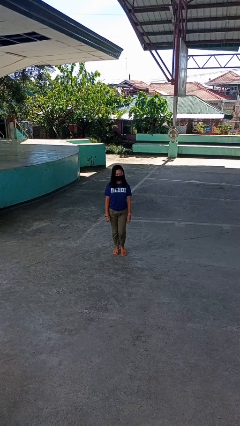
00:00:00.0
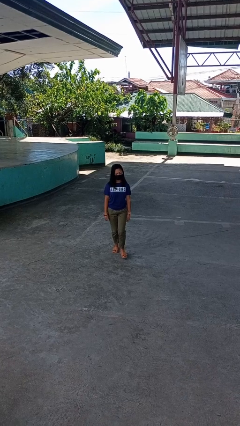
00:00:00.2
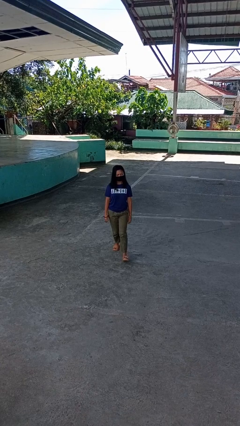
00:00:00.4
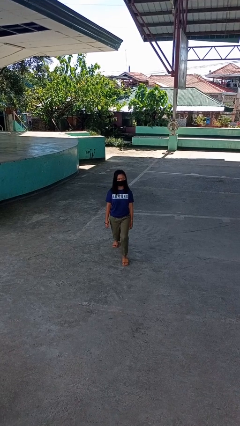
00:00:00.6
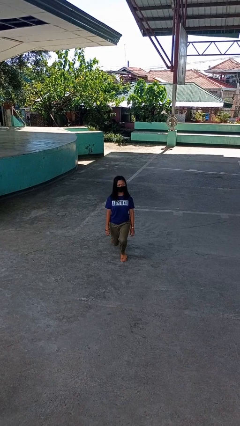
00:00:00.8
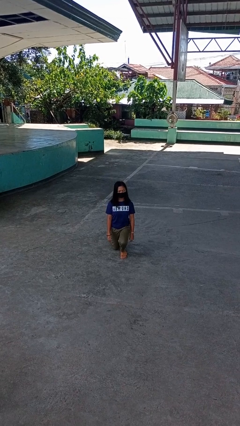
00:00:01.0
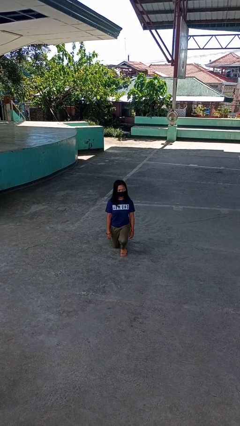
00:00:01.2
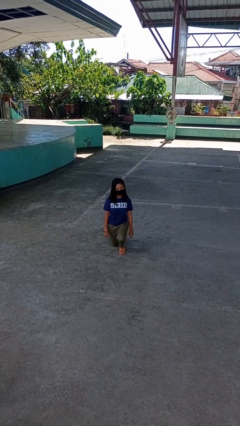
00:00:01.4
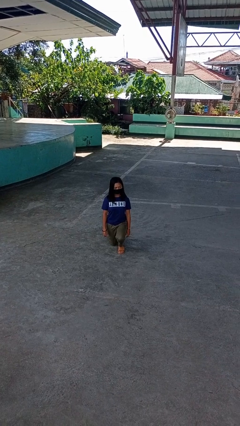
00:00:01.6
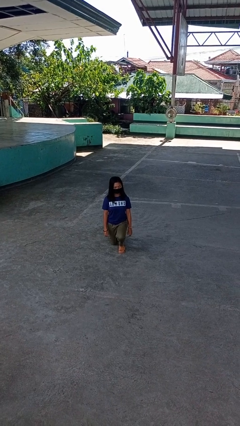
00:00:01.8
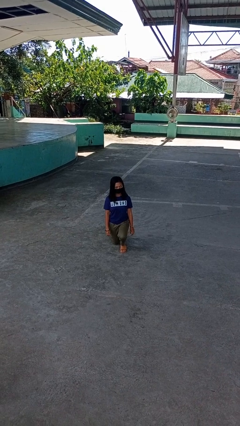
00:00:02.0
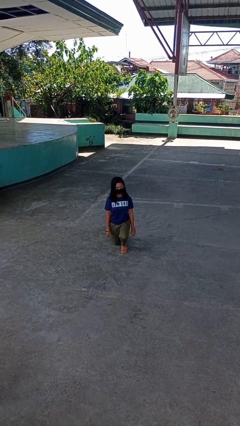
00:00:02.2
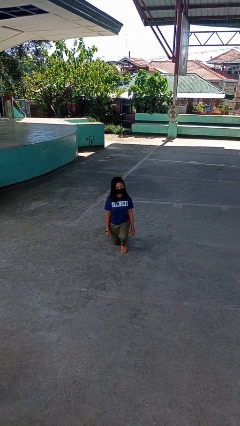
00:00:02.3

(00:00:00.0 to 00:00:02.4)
person kneels

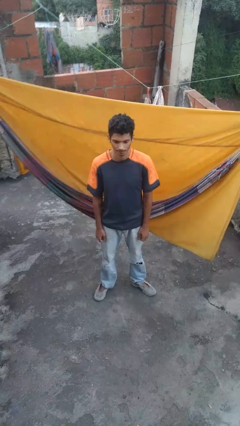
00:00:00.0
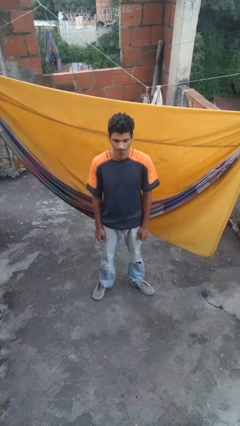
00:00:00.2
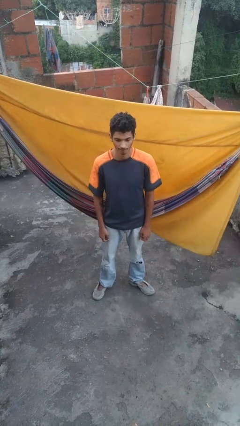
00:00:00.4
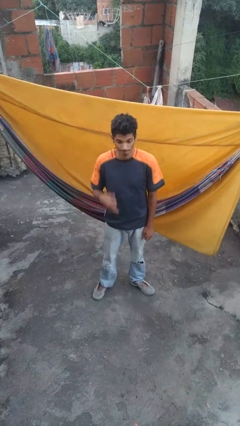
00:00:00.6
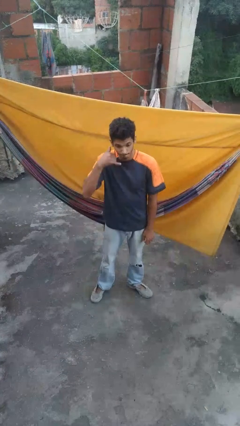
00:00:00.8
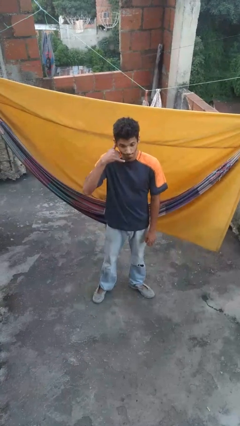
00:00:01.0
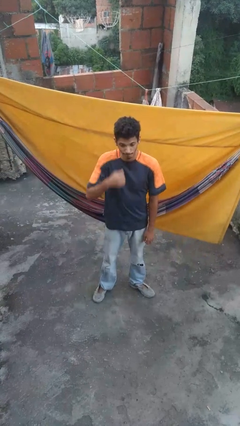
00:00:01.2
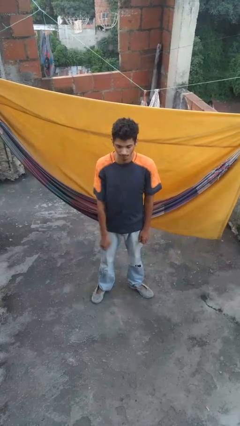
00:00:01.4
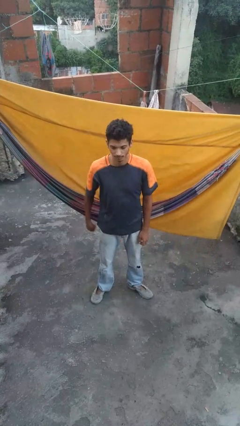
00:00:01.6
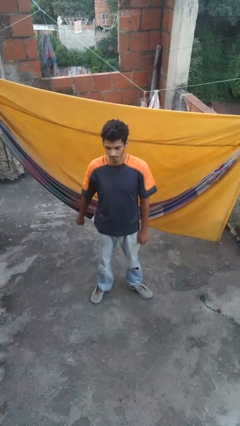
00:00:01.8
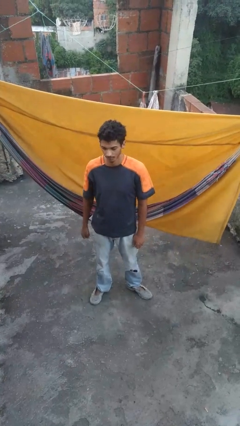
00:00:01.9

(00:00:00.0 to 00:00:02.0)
person gestures call me

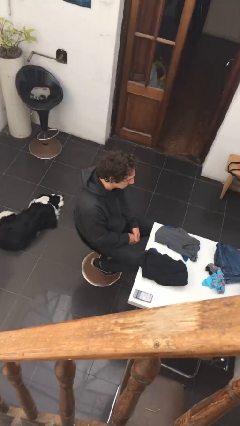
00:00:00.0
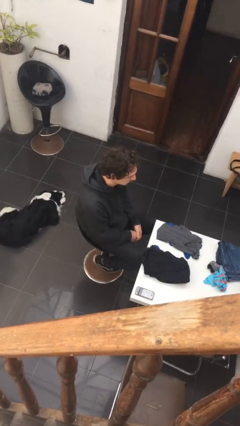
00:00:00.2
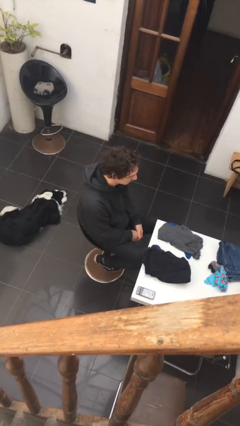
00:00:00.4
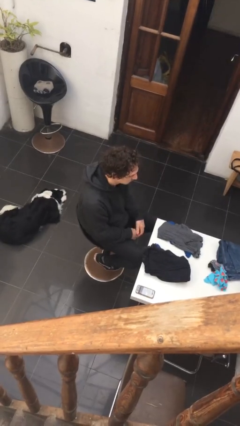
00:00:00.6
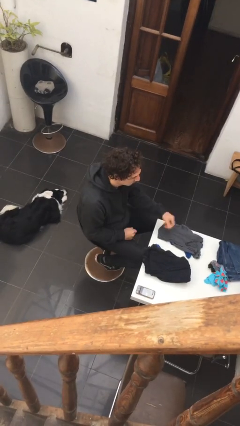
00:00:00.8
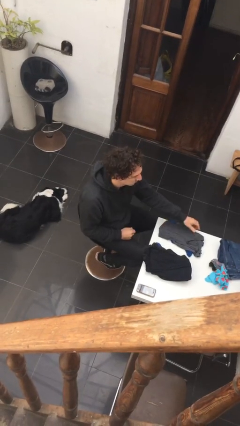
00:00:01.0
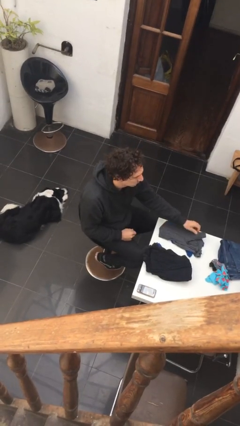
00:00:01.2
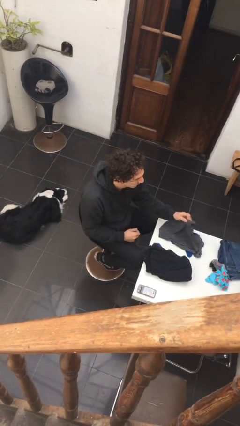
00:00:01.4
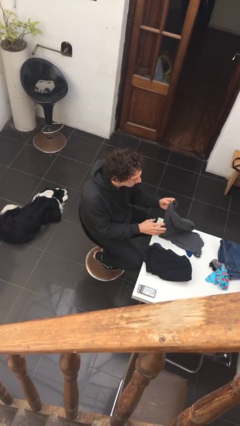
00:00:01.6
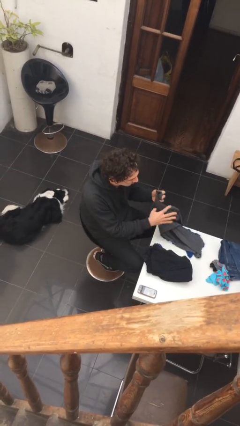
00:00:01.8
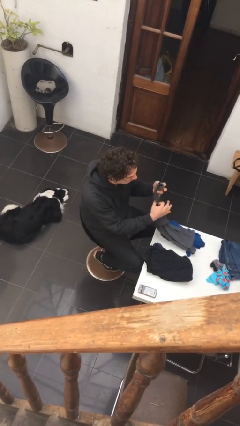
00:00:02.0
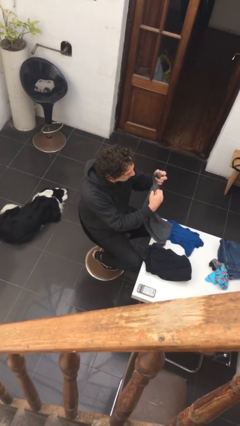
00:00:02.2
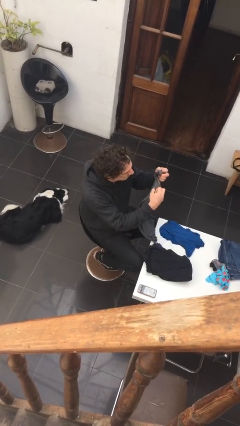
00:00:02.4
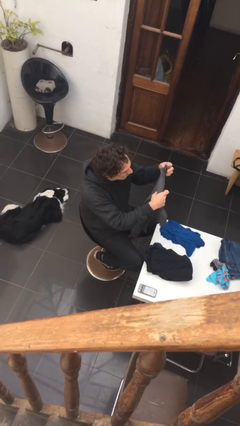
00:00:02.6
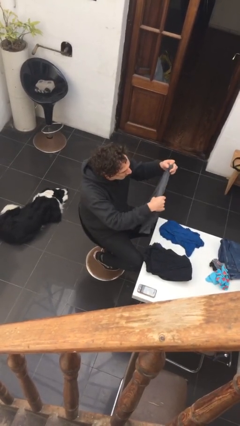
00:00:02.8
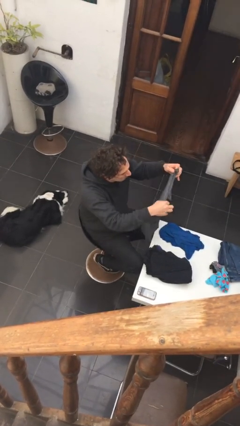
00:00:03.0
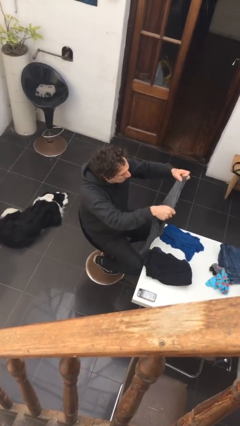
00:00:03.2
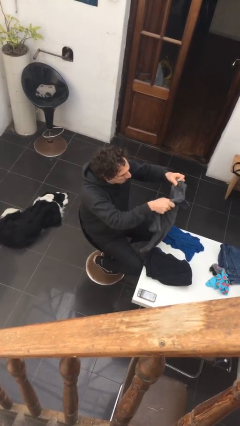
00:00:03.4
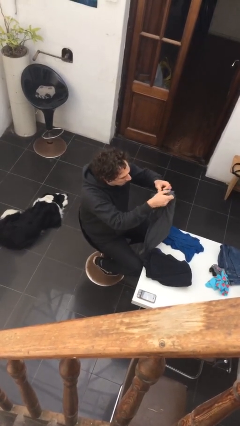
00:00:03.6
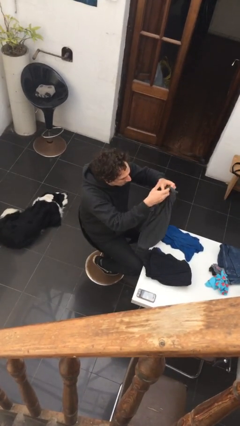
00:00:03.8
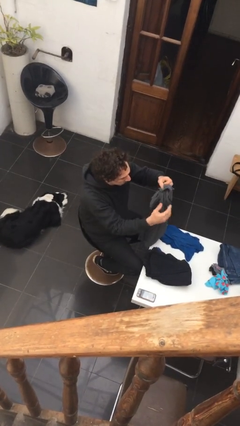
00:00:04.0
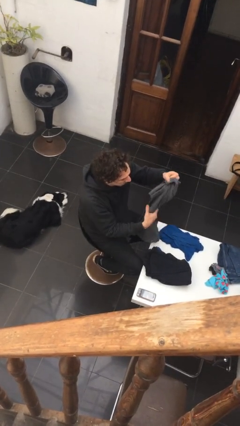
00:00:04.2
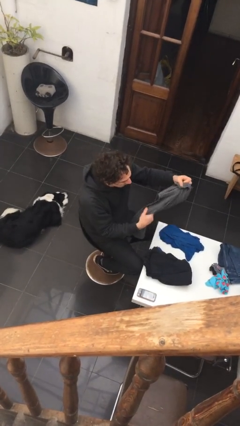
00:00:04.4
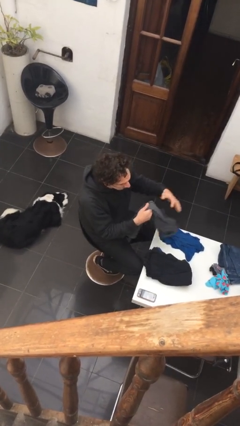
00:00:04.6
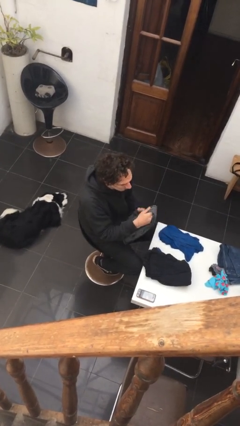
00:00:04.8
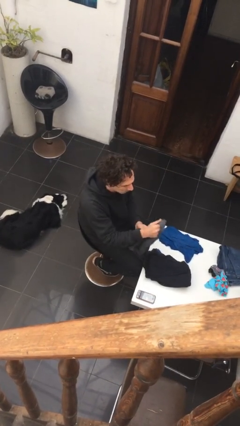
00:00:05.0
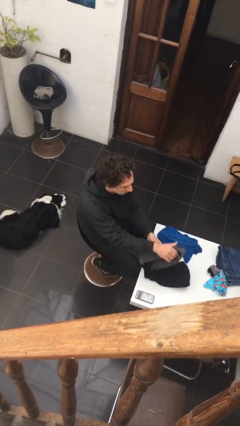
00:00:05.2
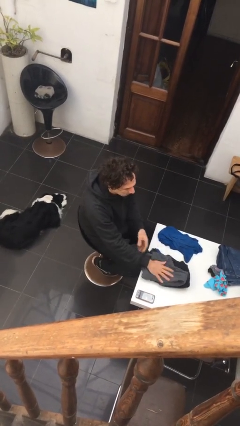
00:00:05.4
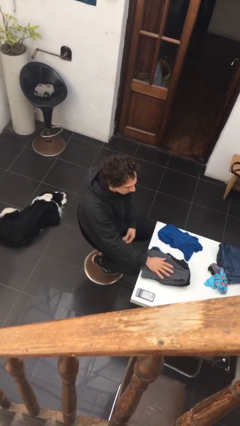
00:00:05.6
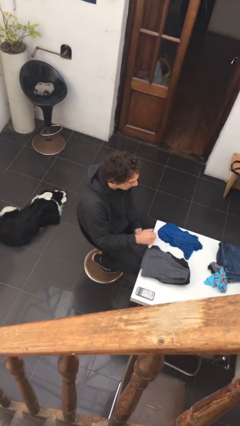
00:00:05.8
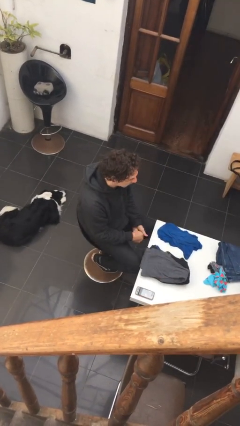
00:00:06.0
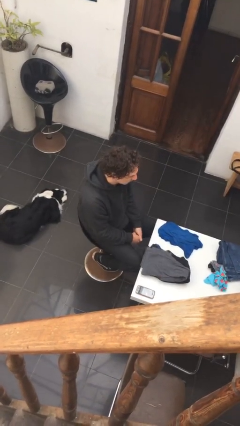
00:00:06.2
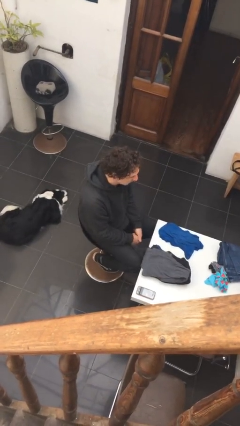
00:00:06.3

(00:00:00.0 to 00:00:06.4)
person folds shirt

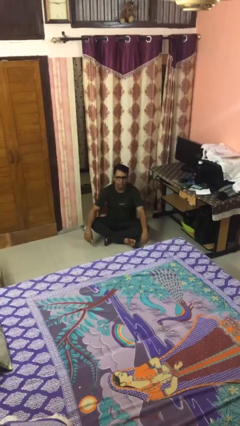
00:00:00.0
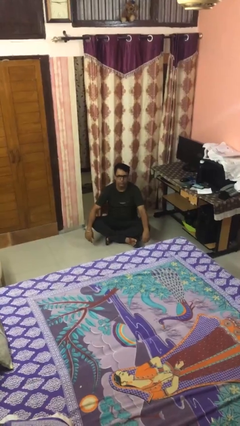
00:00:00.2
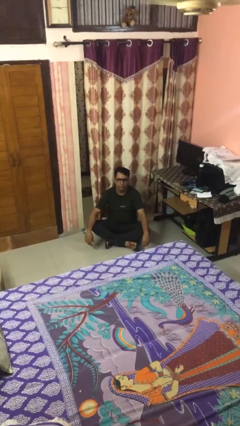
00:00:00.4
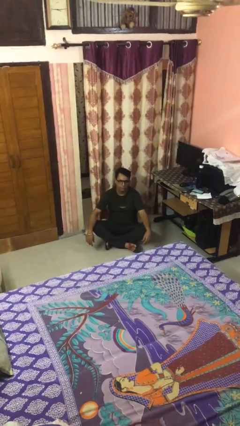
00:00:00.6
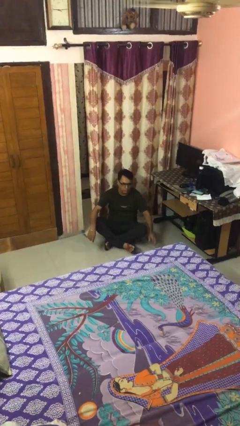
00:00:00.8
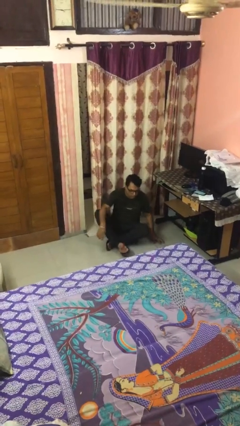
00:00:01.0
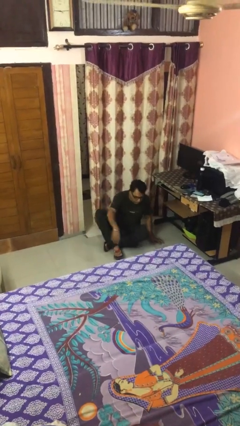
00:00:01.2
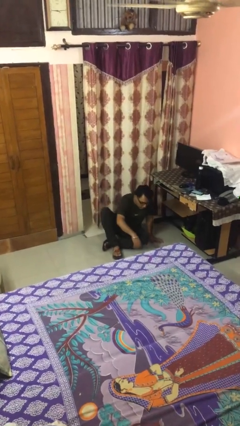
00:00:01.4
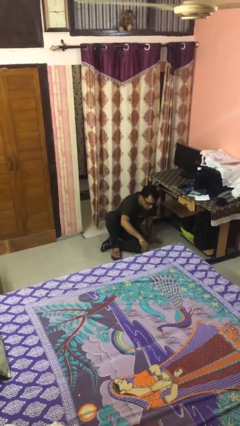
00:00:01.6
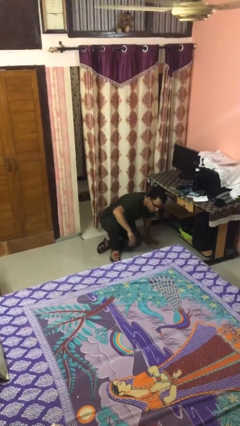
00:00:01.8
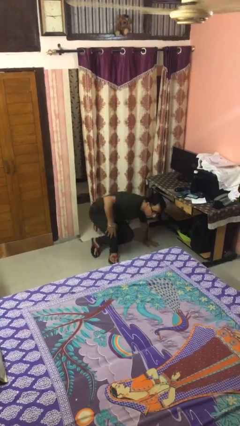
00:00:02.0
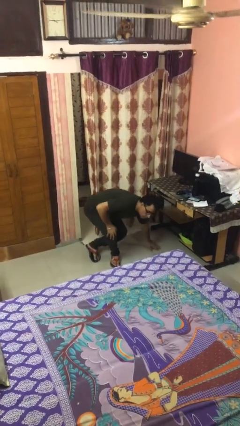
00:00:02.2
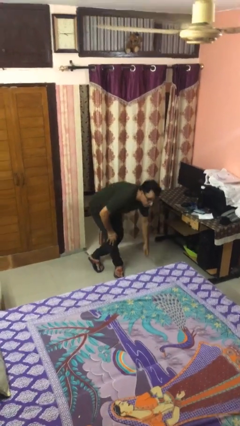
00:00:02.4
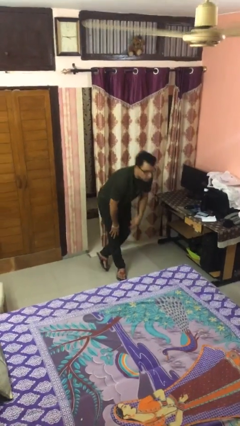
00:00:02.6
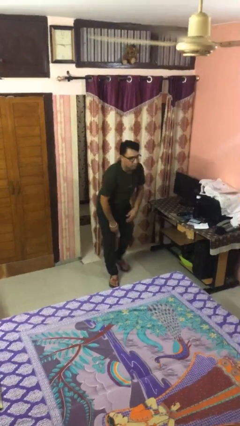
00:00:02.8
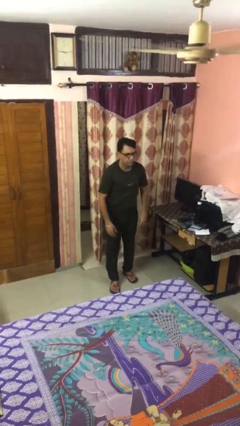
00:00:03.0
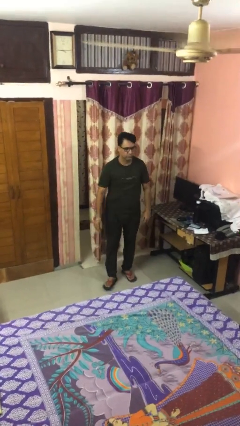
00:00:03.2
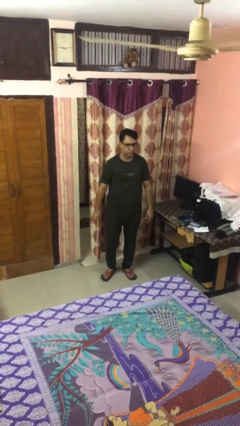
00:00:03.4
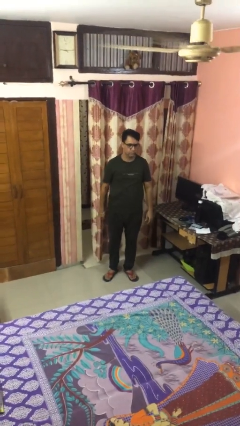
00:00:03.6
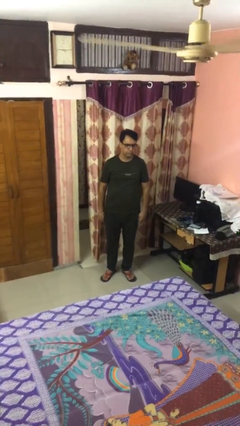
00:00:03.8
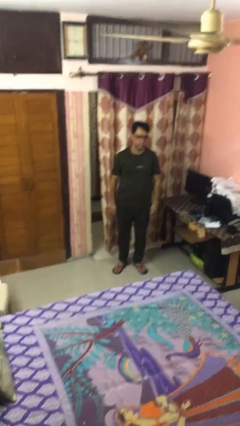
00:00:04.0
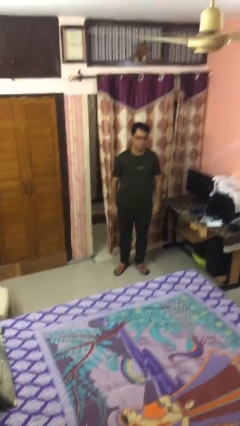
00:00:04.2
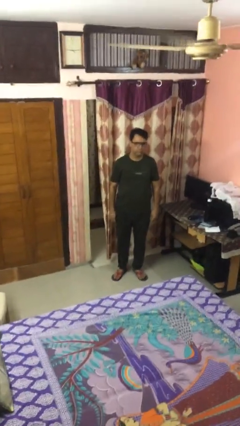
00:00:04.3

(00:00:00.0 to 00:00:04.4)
person stands up from floor

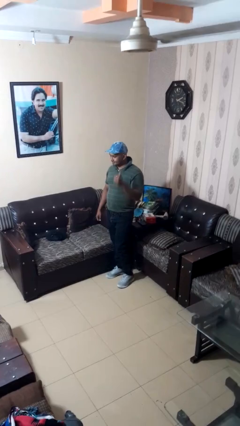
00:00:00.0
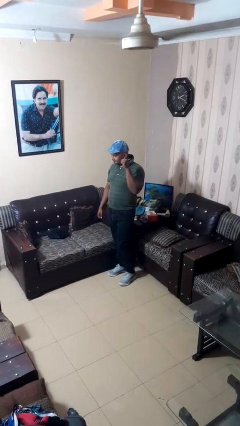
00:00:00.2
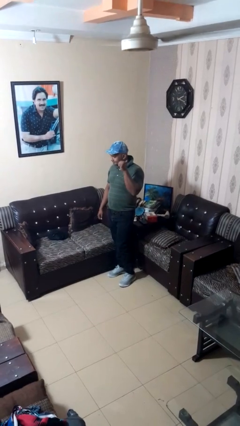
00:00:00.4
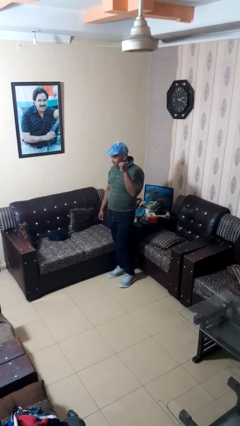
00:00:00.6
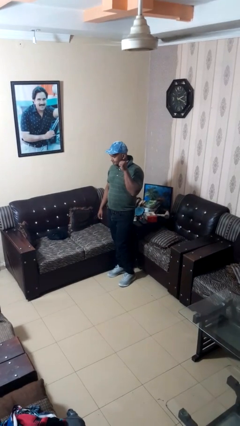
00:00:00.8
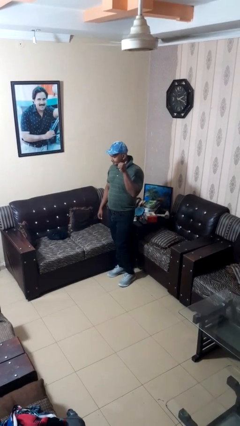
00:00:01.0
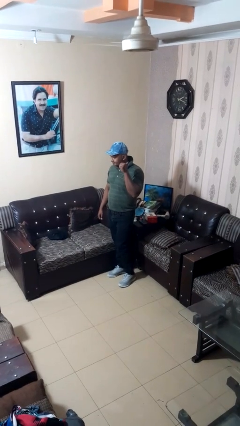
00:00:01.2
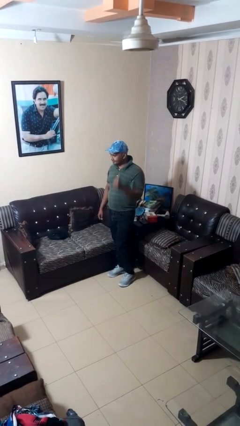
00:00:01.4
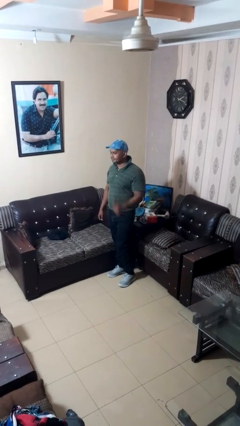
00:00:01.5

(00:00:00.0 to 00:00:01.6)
person gestures behind me

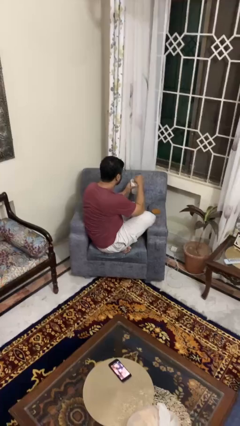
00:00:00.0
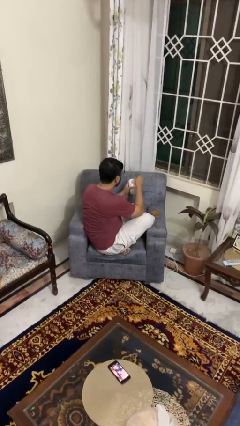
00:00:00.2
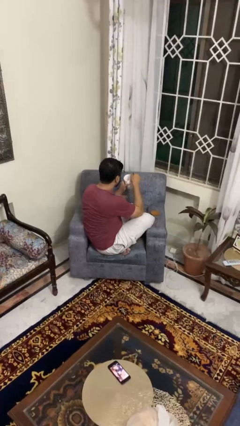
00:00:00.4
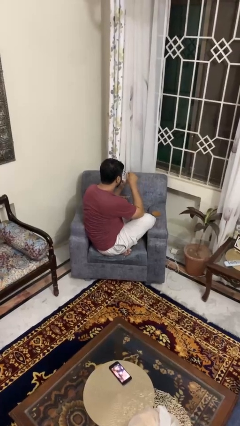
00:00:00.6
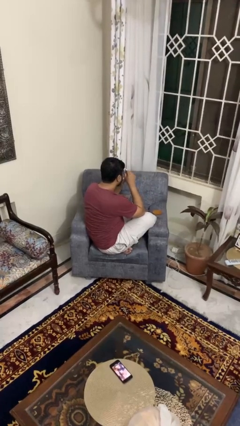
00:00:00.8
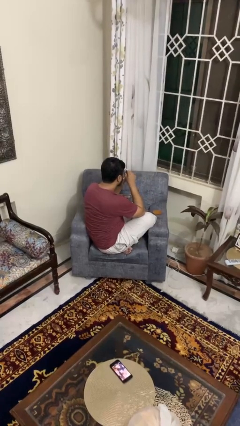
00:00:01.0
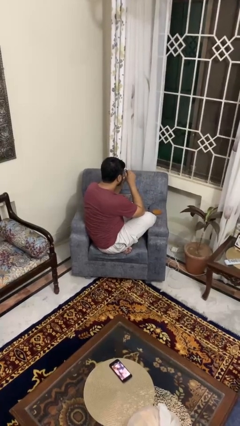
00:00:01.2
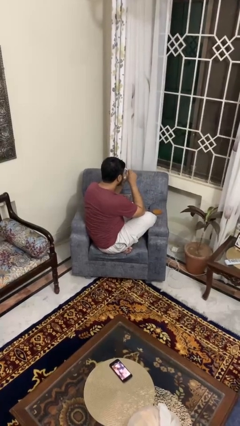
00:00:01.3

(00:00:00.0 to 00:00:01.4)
person drinks from mug
